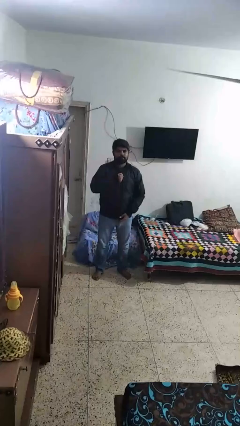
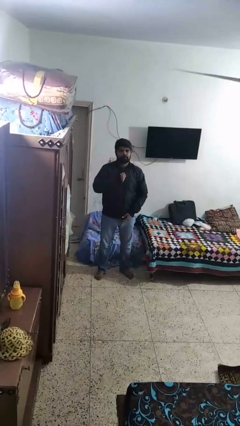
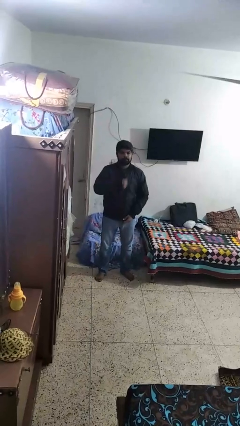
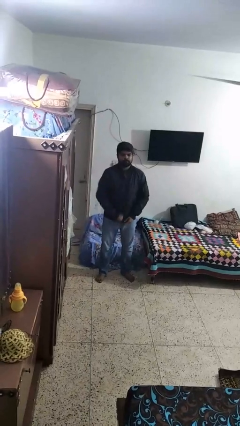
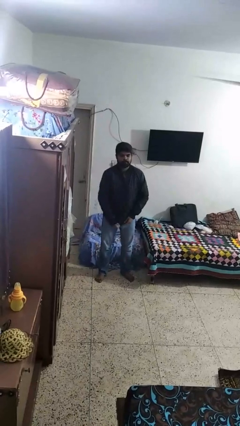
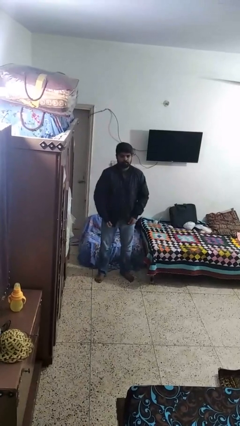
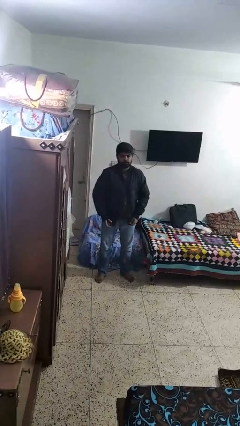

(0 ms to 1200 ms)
person unzips jacket

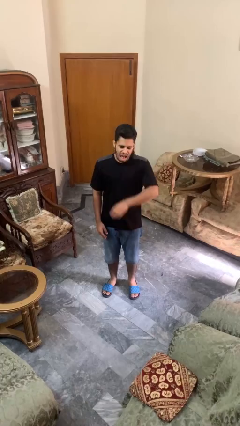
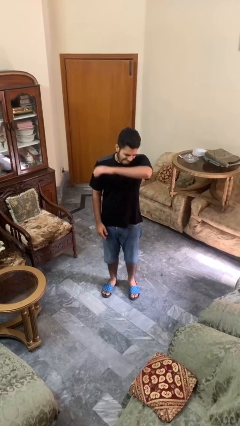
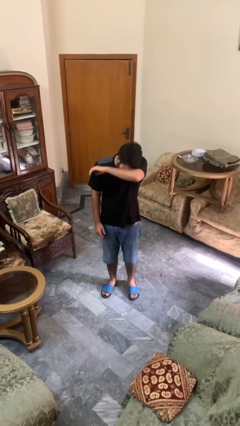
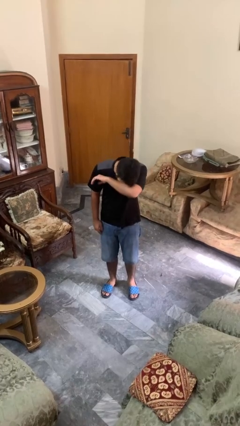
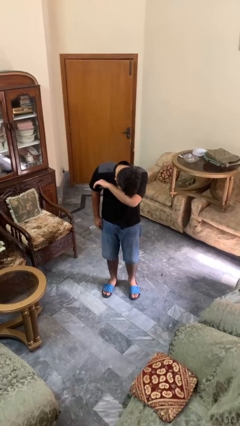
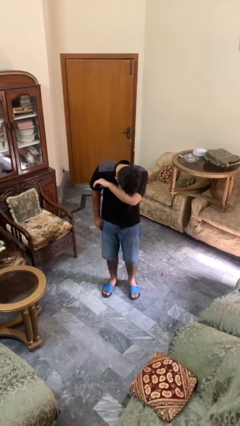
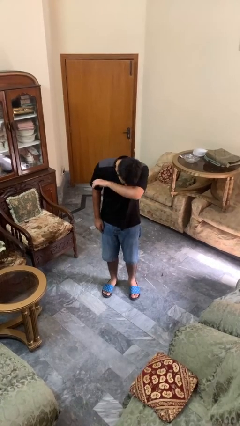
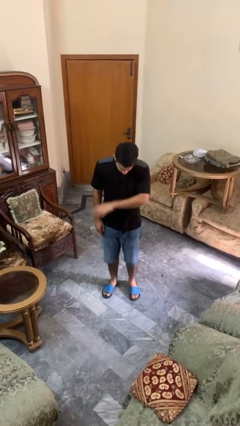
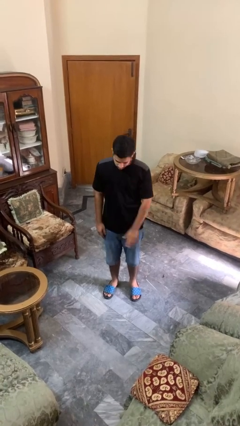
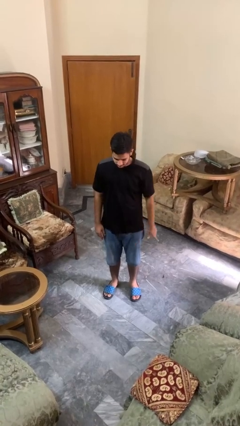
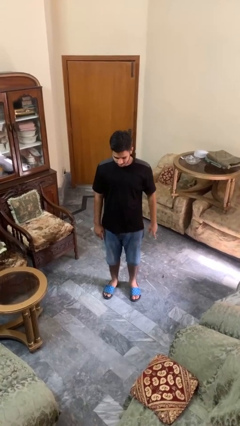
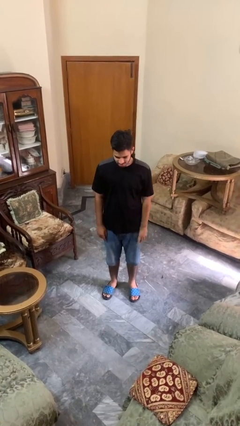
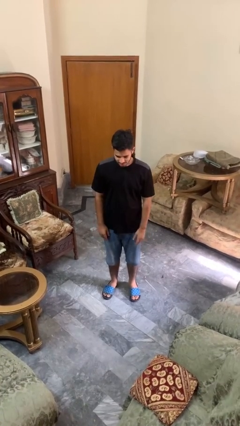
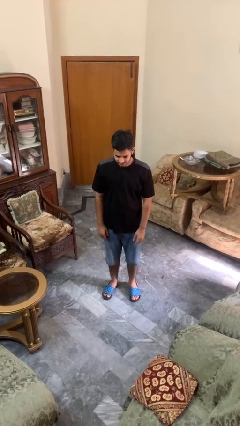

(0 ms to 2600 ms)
person sneezes into arm

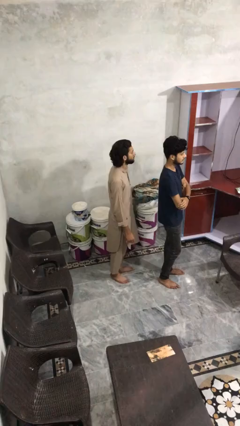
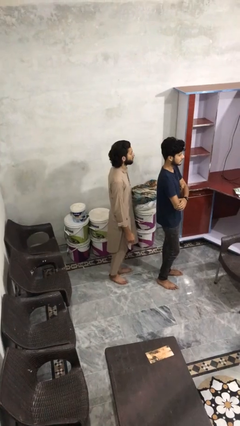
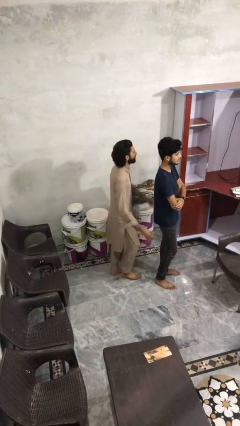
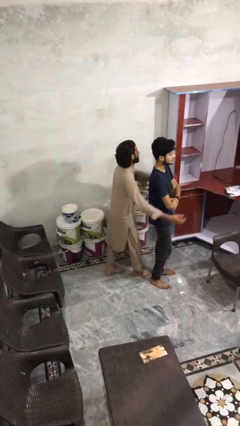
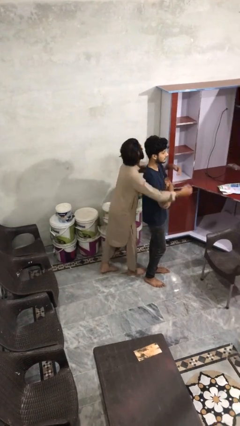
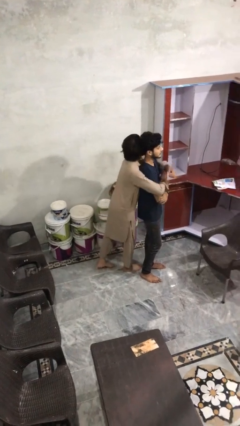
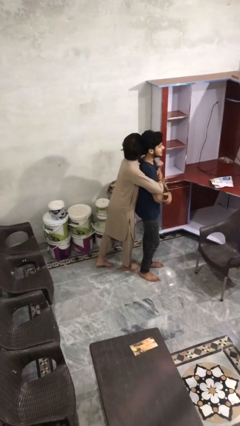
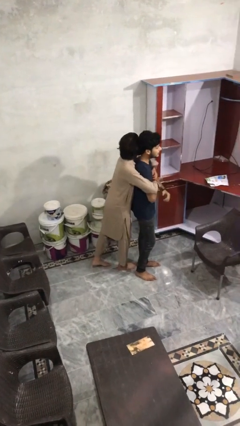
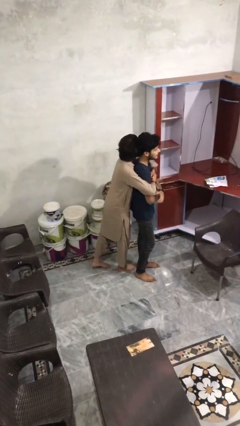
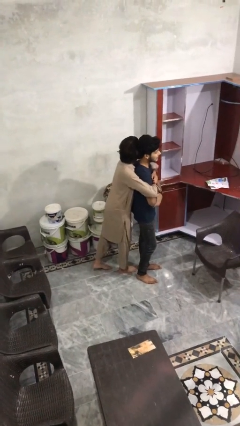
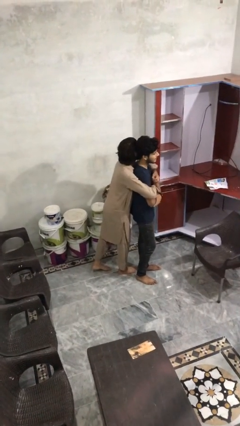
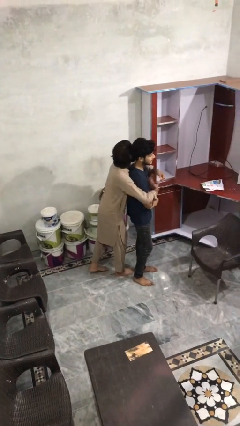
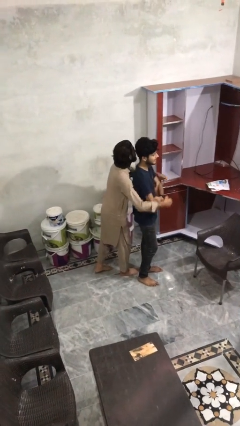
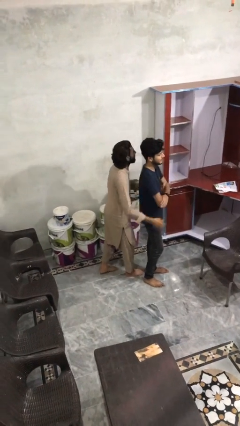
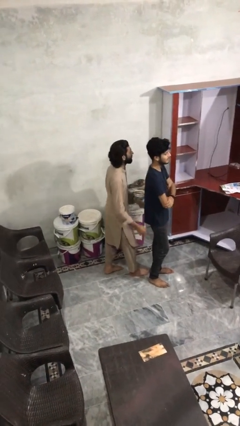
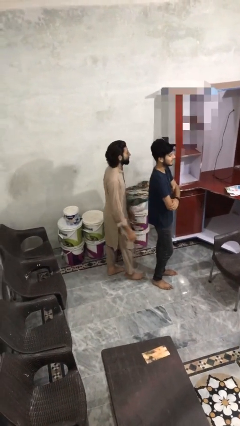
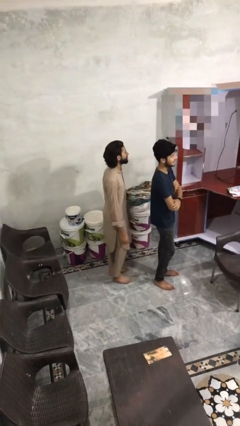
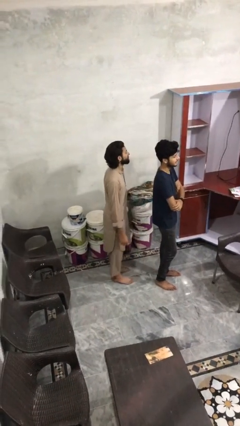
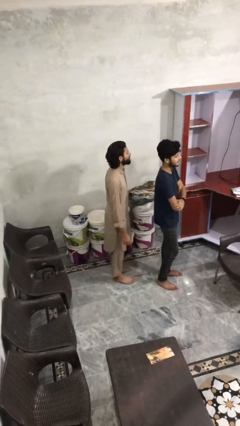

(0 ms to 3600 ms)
person hugs person from behind

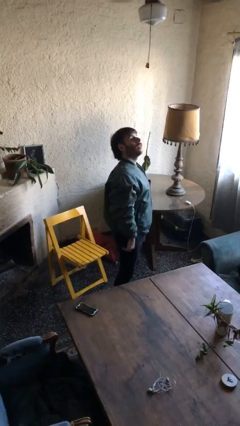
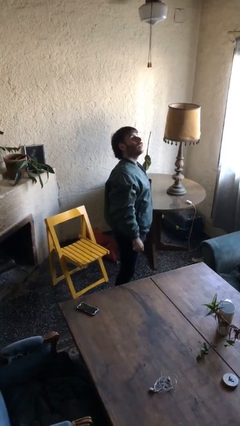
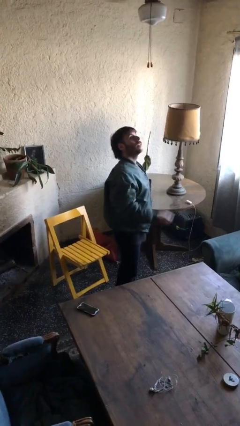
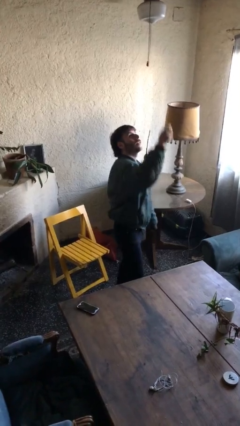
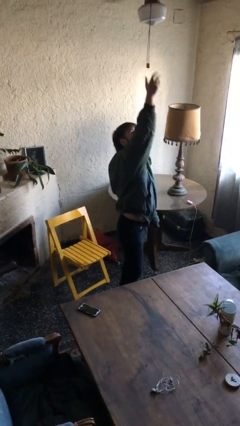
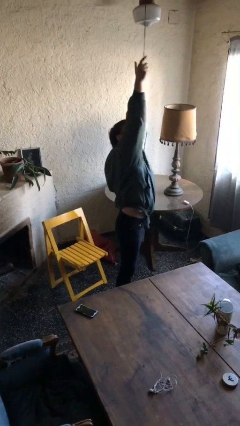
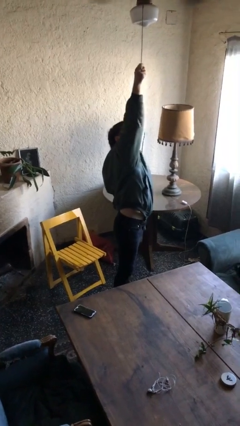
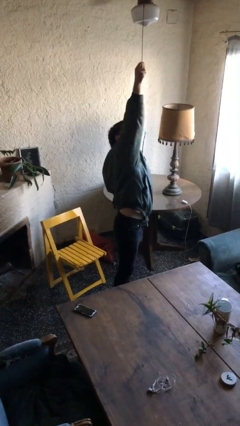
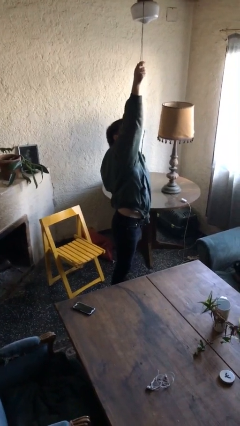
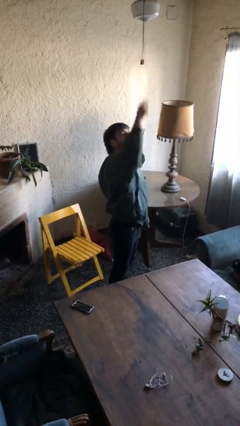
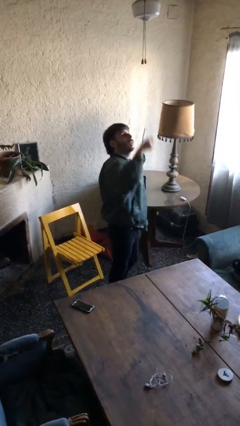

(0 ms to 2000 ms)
person turns off fan

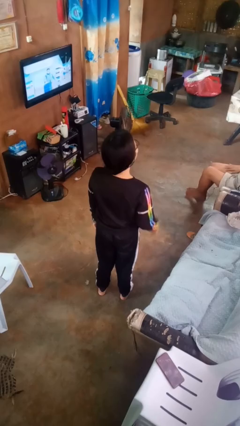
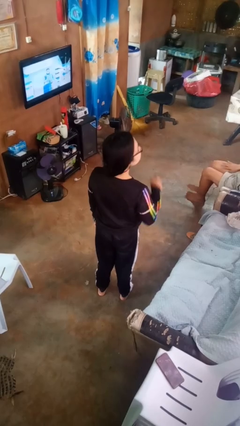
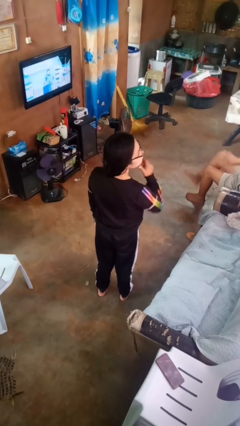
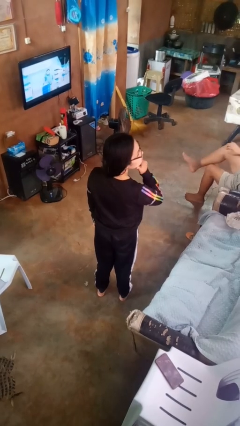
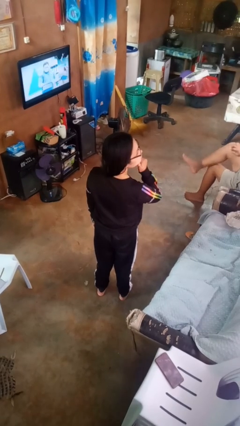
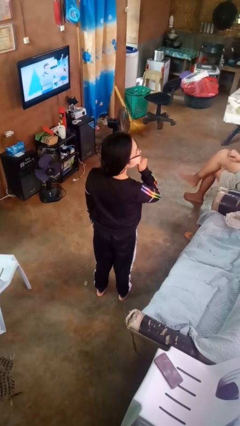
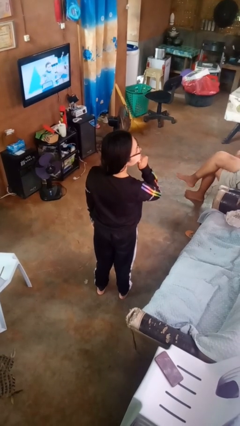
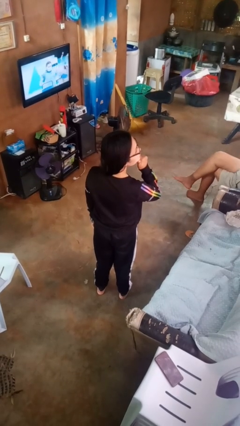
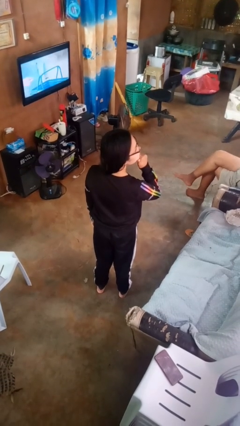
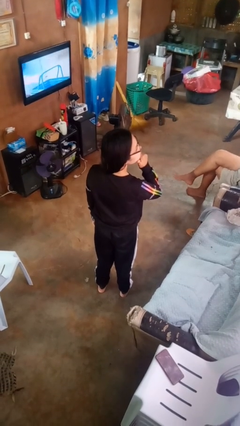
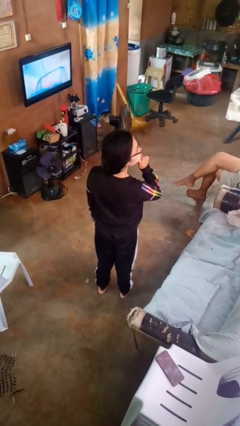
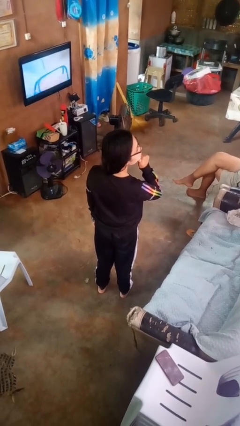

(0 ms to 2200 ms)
person strokes chin

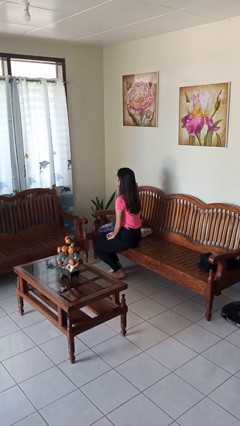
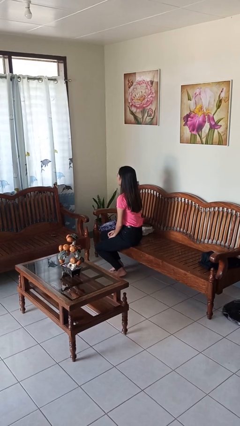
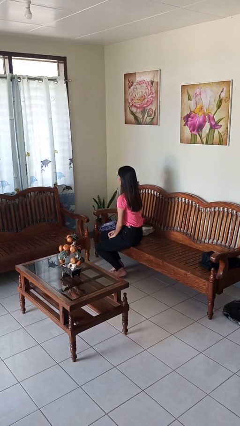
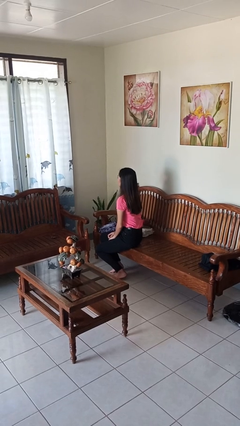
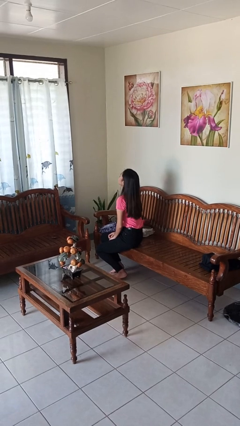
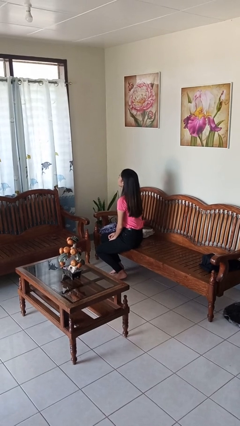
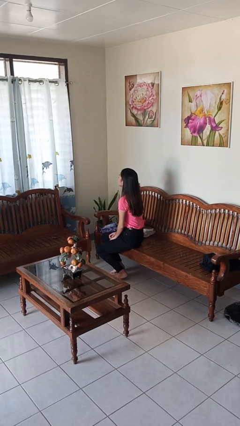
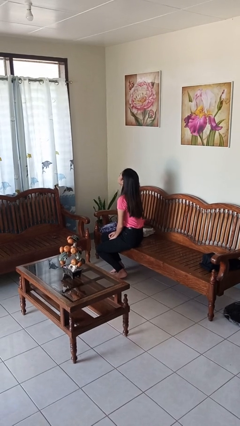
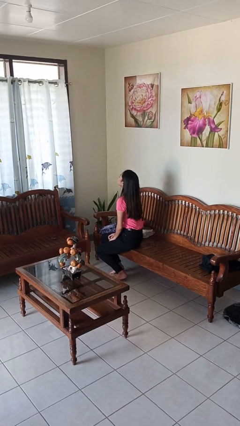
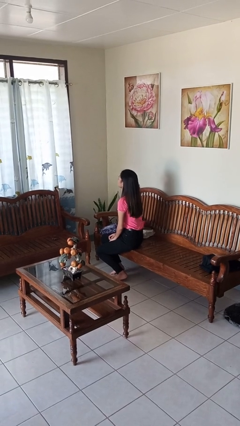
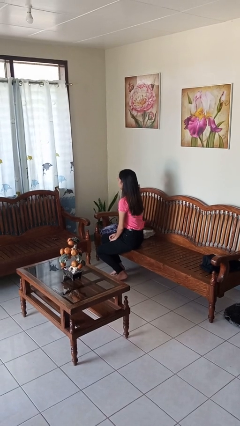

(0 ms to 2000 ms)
person nods head

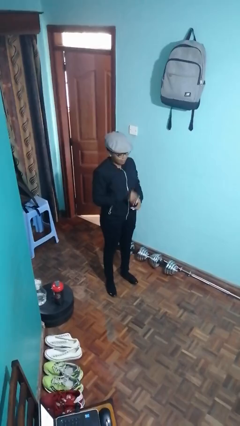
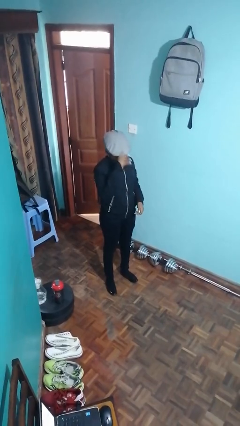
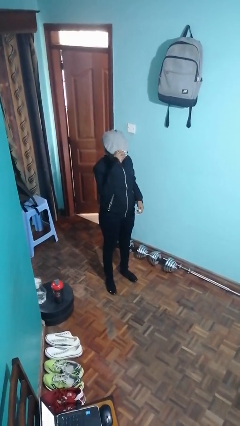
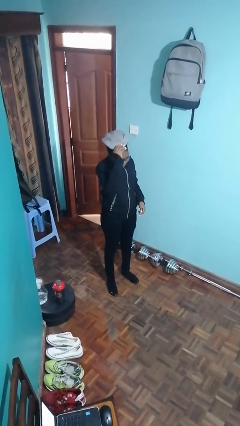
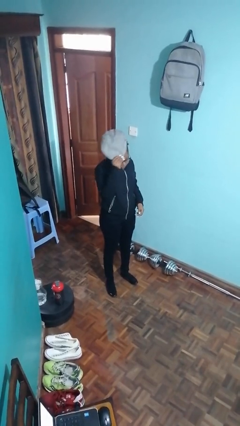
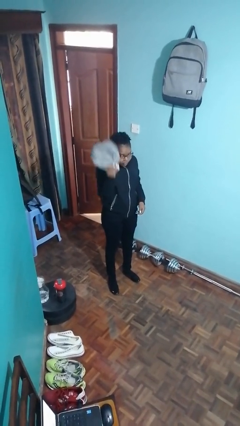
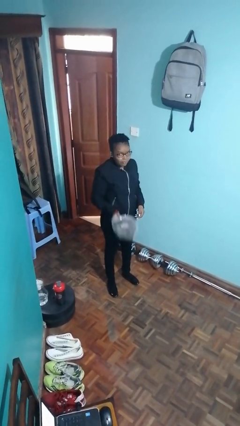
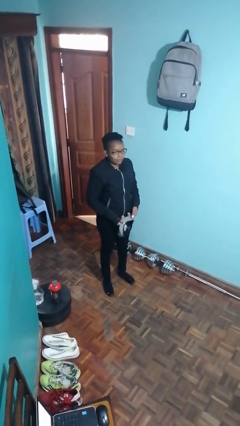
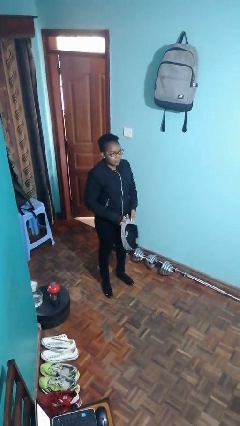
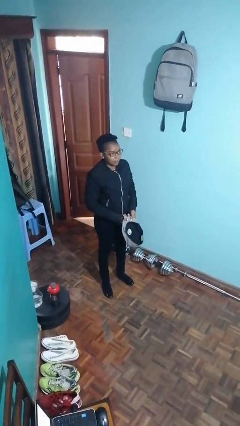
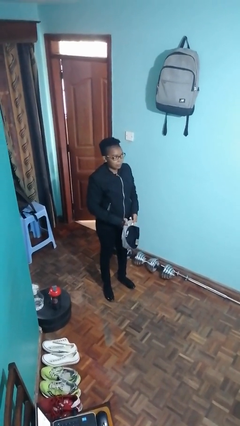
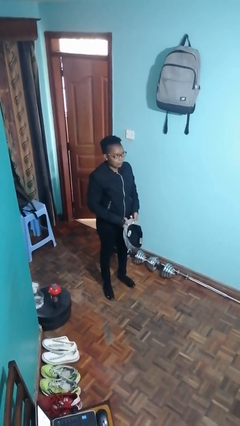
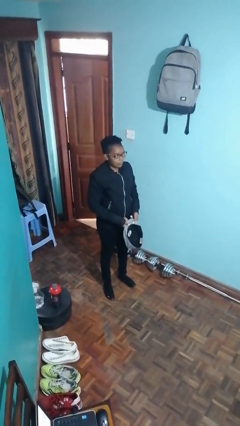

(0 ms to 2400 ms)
person takes off hat

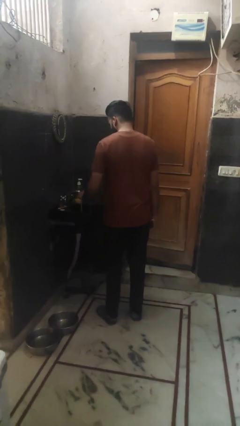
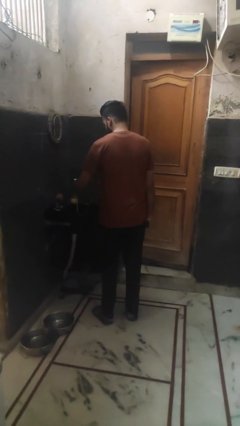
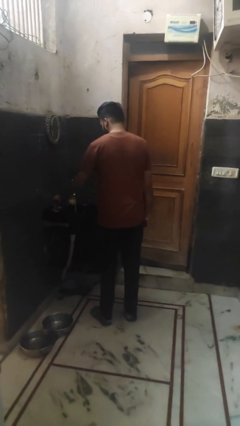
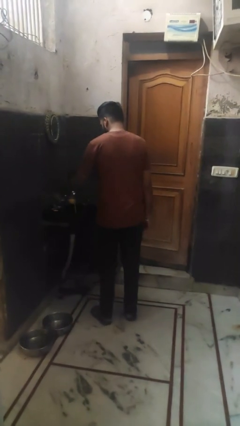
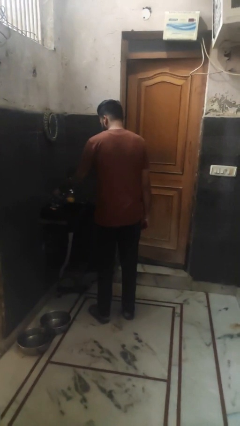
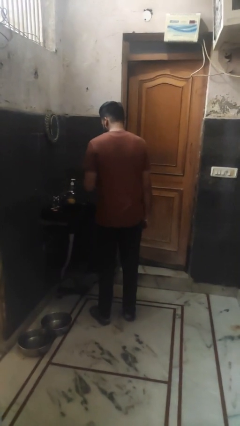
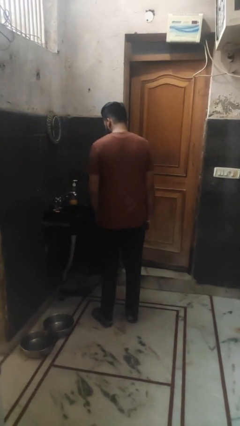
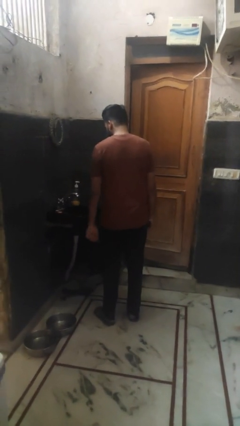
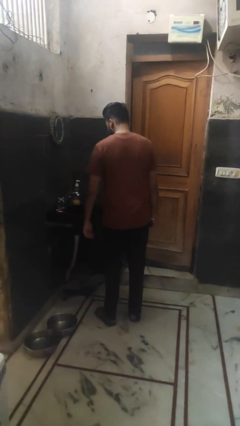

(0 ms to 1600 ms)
person turns off faucet
